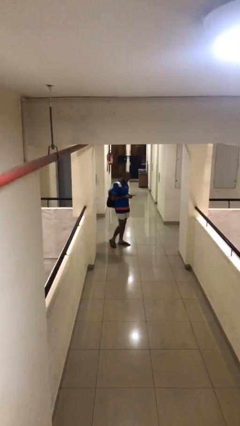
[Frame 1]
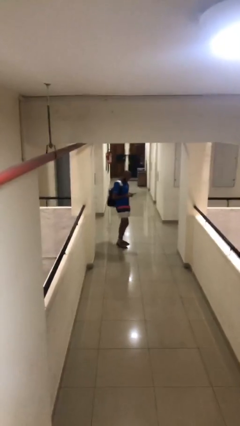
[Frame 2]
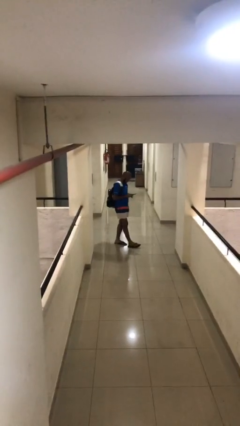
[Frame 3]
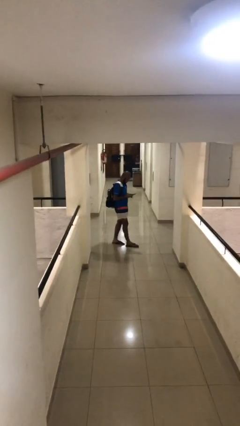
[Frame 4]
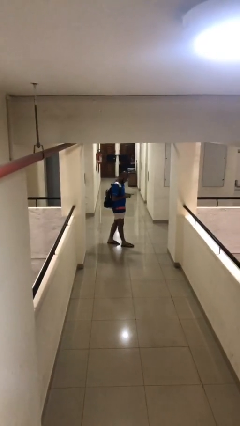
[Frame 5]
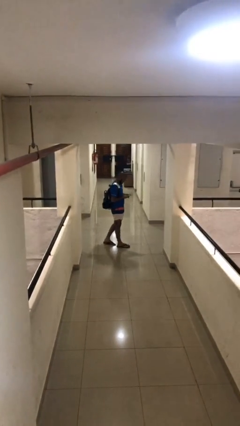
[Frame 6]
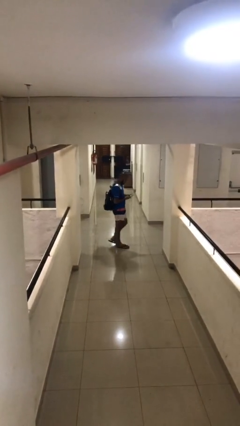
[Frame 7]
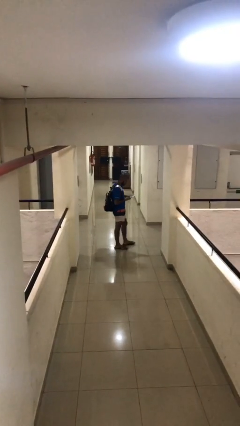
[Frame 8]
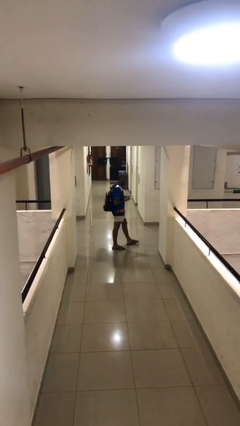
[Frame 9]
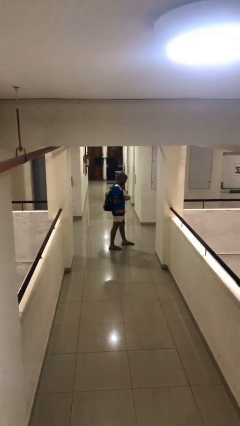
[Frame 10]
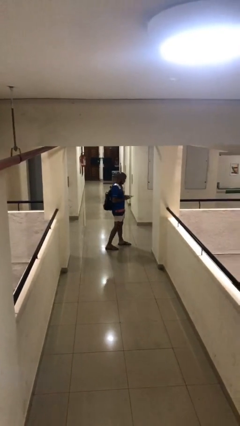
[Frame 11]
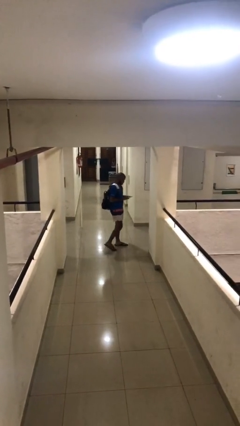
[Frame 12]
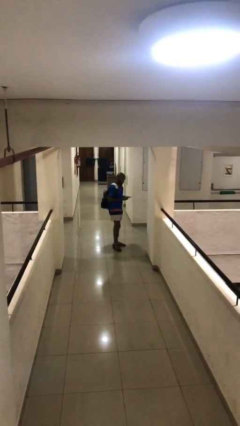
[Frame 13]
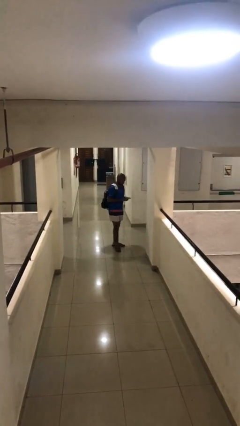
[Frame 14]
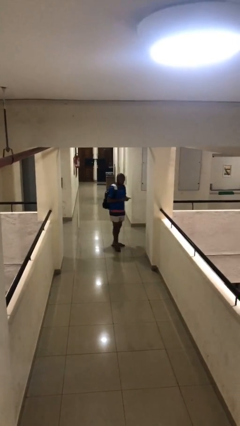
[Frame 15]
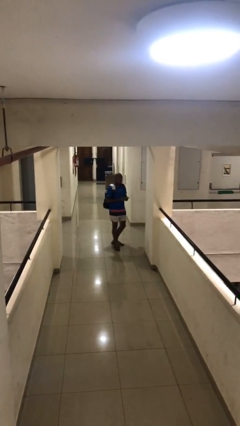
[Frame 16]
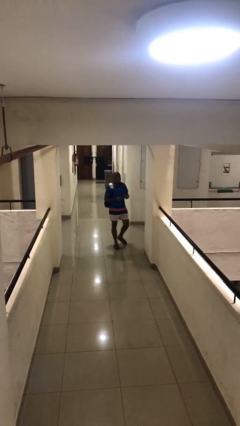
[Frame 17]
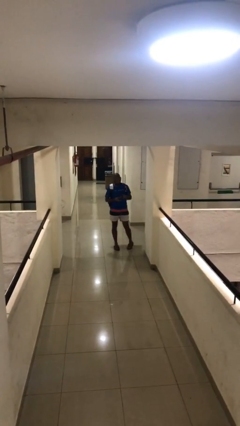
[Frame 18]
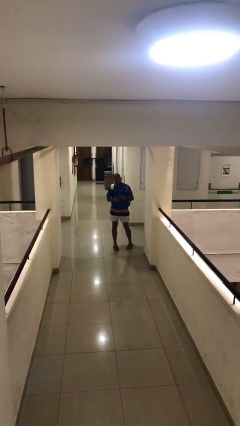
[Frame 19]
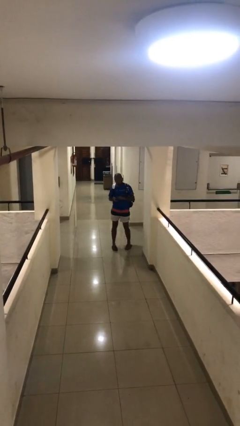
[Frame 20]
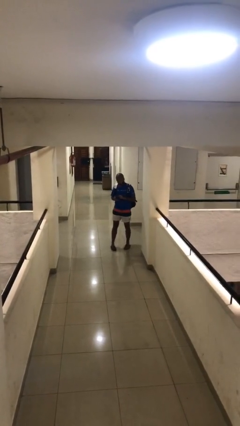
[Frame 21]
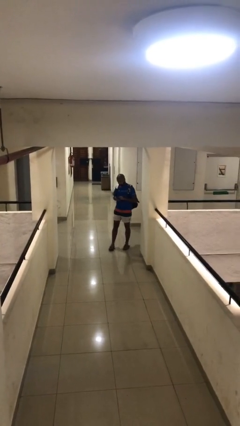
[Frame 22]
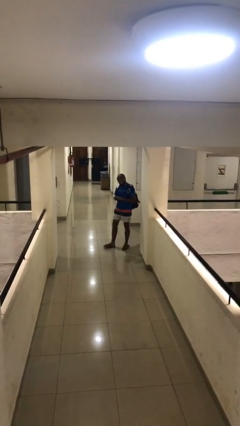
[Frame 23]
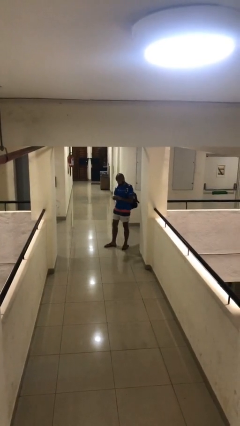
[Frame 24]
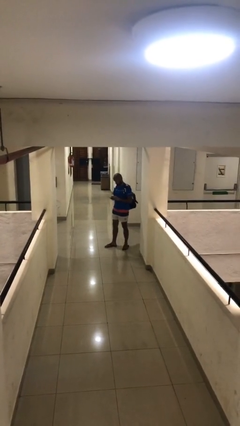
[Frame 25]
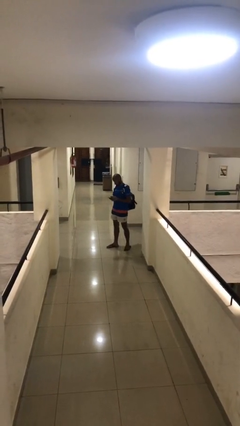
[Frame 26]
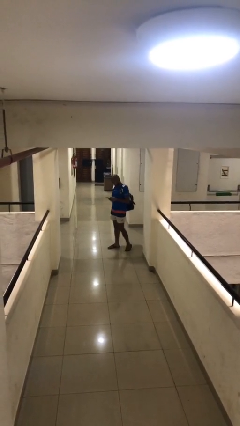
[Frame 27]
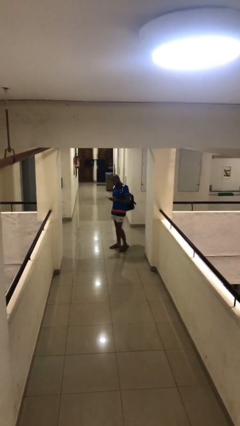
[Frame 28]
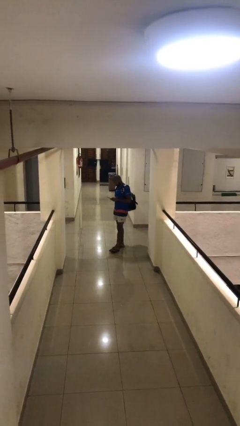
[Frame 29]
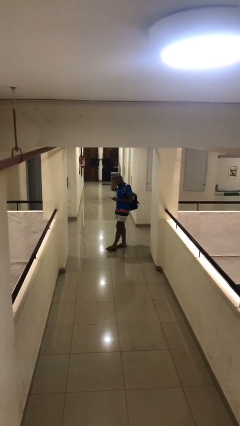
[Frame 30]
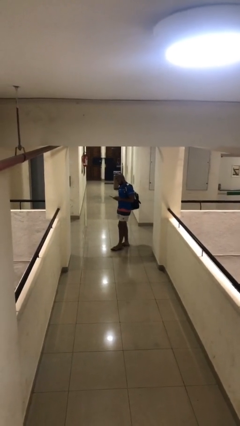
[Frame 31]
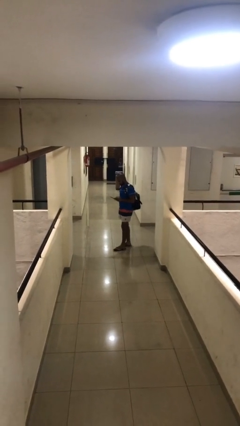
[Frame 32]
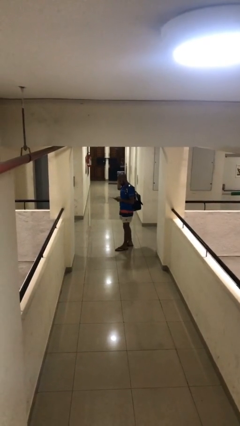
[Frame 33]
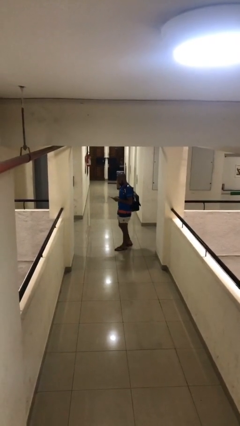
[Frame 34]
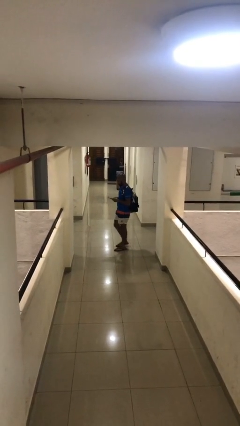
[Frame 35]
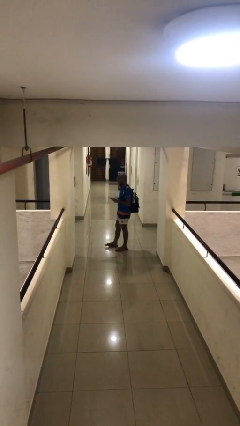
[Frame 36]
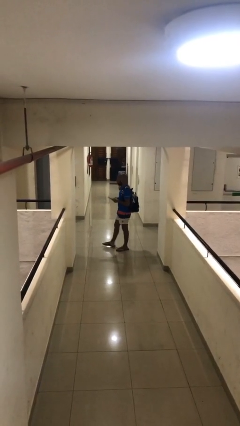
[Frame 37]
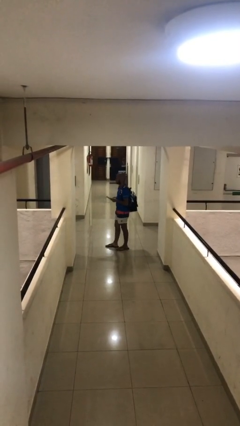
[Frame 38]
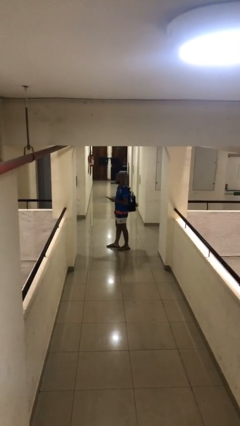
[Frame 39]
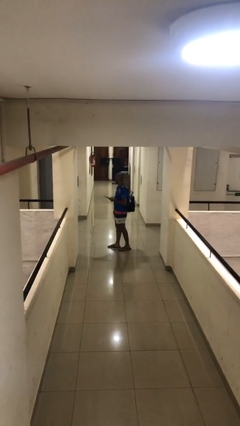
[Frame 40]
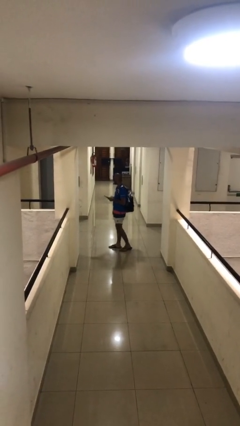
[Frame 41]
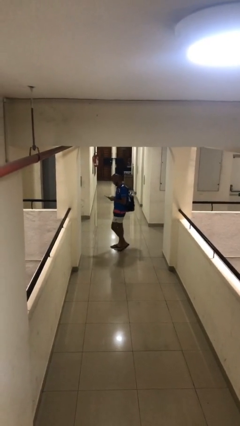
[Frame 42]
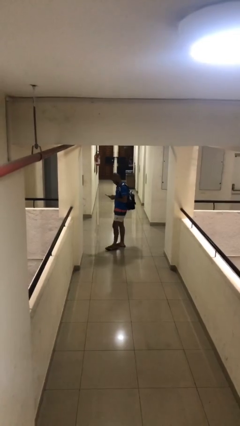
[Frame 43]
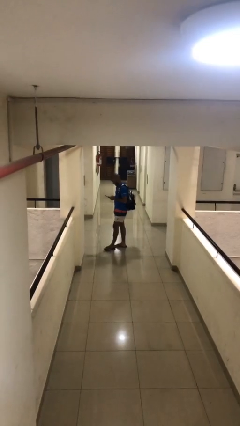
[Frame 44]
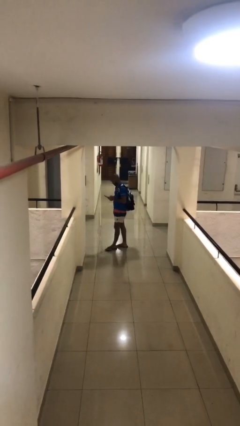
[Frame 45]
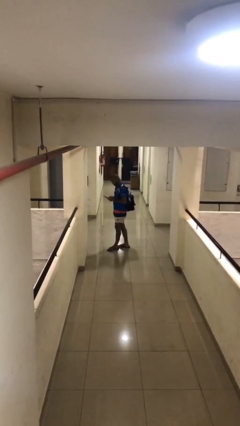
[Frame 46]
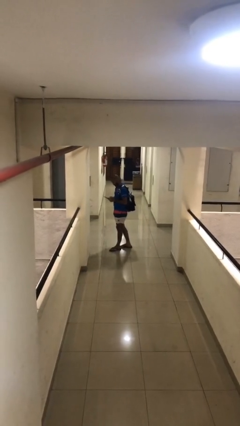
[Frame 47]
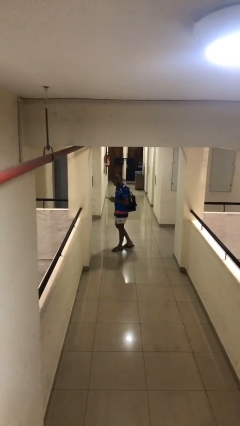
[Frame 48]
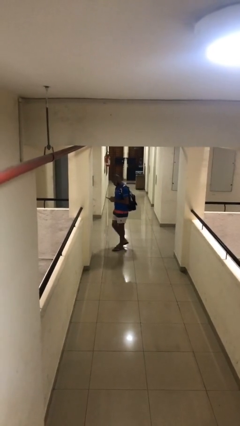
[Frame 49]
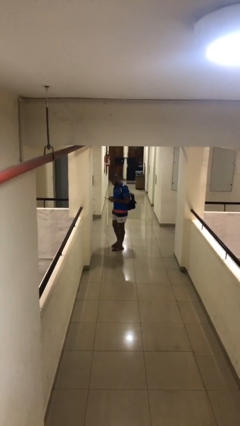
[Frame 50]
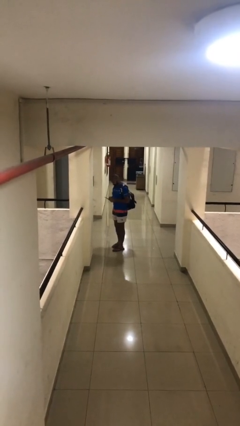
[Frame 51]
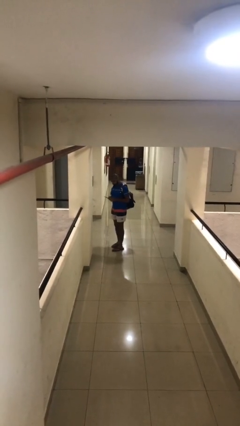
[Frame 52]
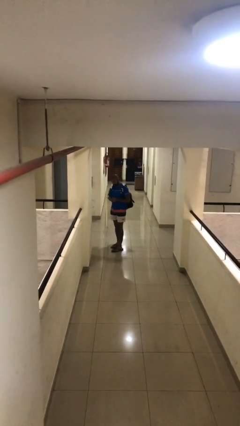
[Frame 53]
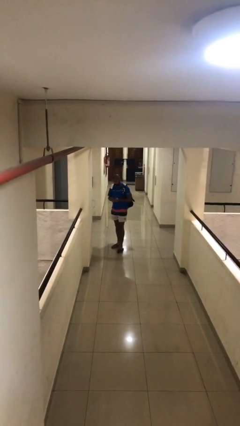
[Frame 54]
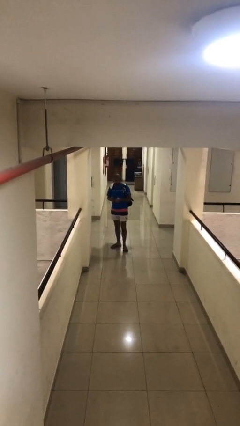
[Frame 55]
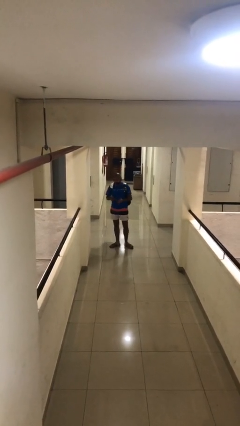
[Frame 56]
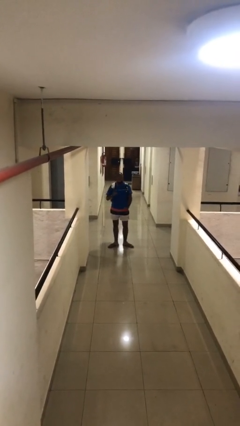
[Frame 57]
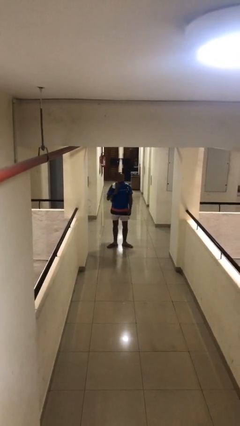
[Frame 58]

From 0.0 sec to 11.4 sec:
person texts on phone

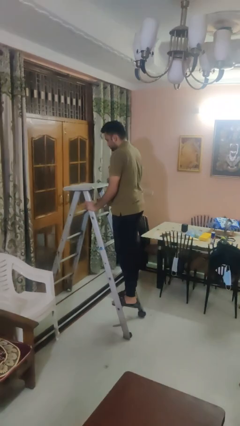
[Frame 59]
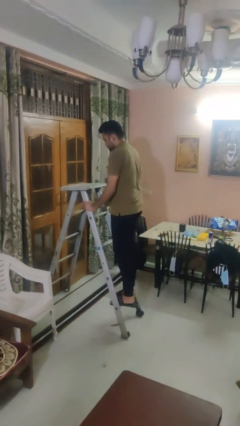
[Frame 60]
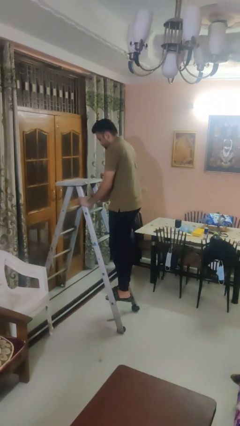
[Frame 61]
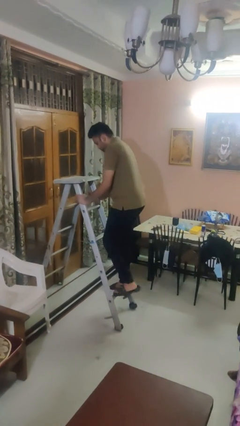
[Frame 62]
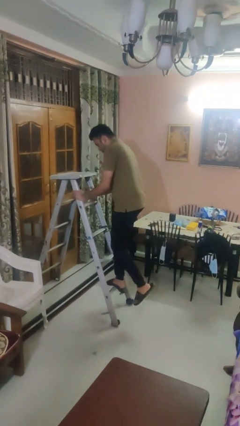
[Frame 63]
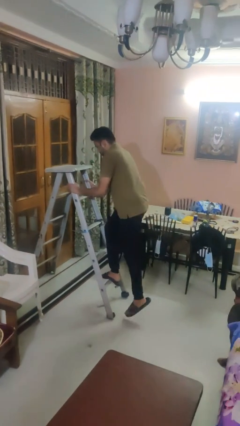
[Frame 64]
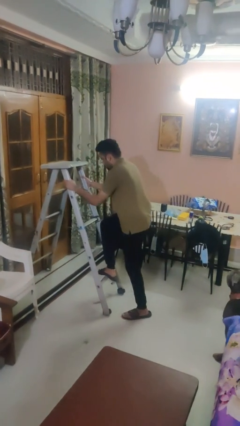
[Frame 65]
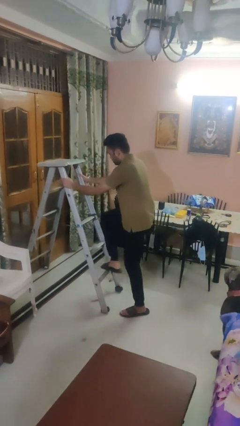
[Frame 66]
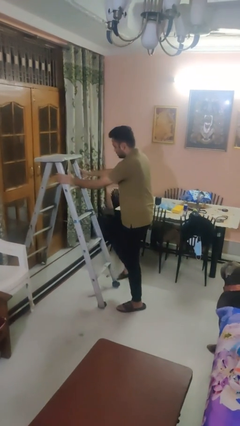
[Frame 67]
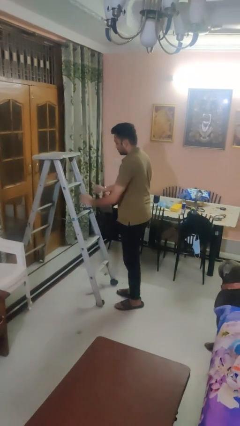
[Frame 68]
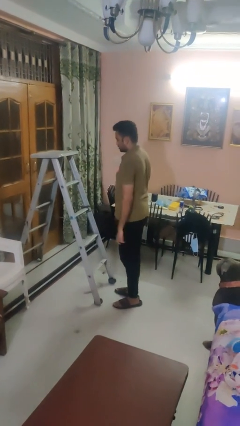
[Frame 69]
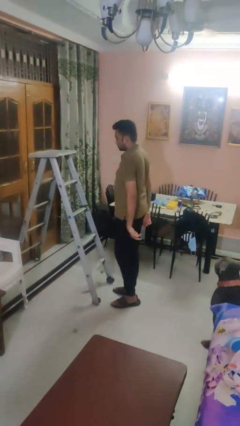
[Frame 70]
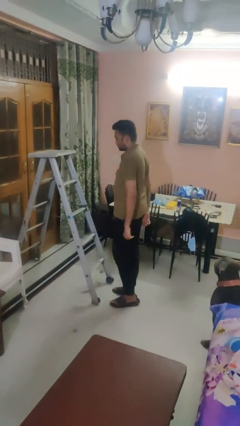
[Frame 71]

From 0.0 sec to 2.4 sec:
person climbs down ladder

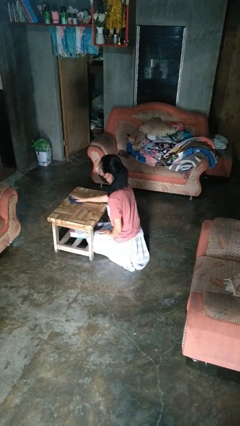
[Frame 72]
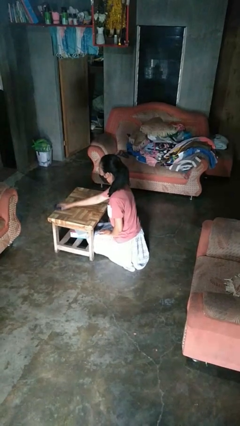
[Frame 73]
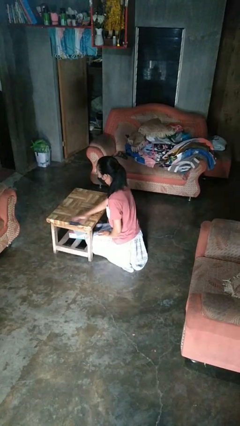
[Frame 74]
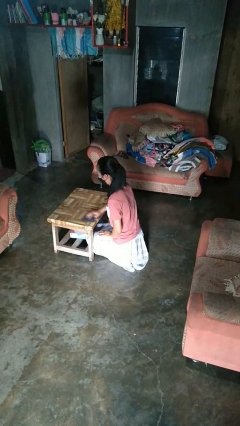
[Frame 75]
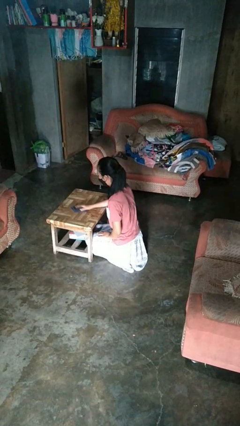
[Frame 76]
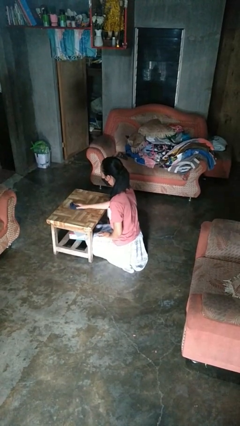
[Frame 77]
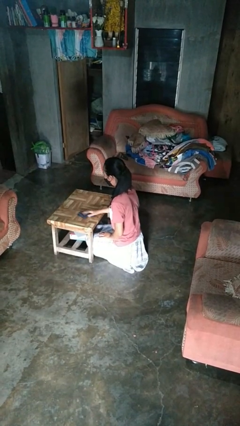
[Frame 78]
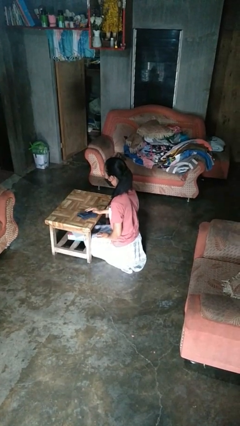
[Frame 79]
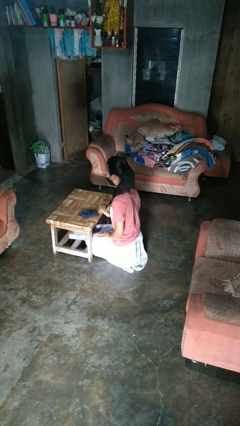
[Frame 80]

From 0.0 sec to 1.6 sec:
person cleans table with rag

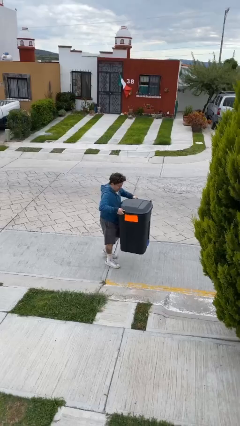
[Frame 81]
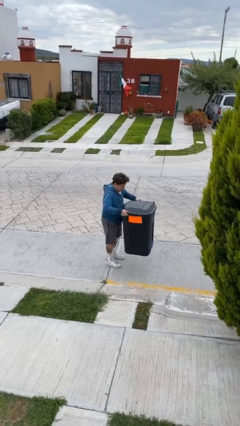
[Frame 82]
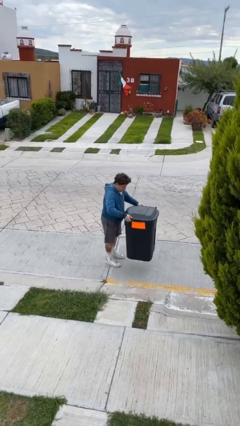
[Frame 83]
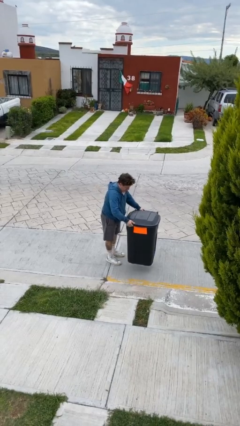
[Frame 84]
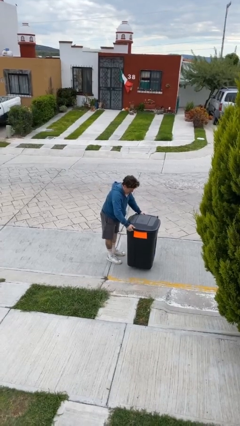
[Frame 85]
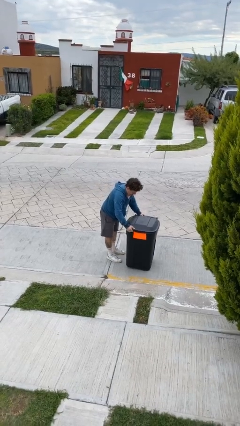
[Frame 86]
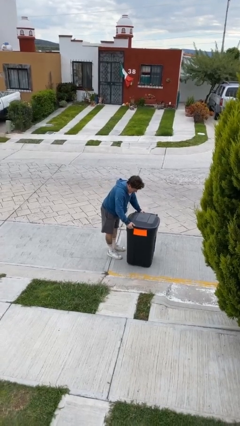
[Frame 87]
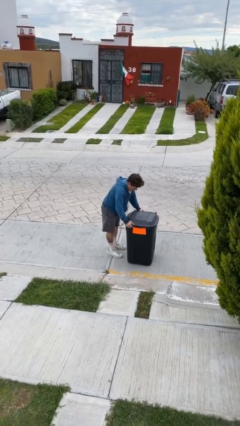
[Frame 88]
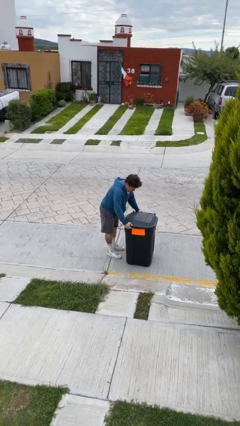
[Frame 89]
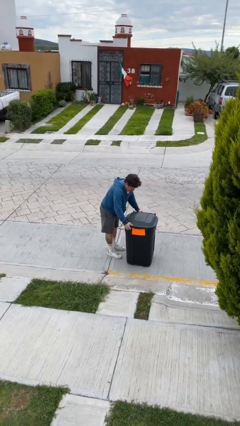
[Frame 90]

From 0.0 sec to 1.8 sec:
person puts down object on floor

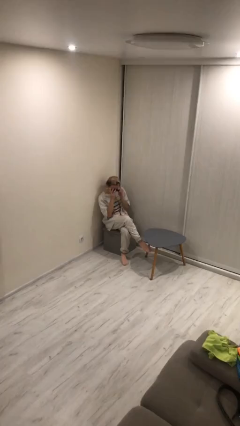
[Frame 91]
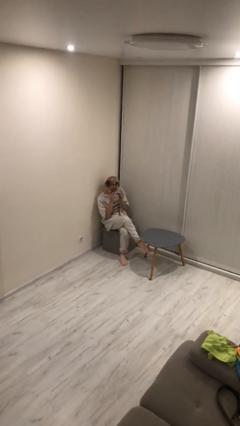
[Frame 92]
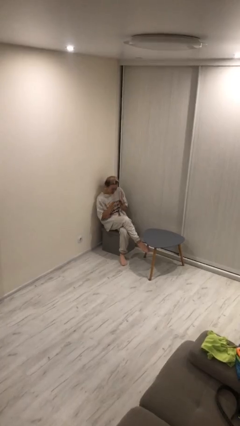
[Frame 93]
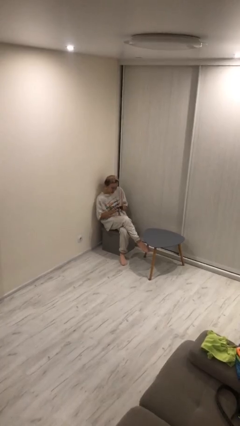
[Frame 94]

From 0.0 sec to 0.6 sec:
person takes off sunglasses
